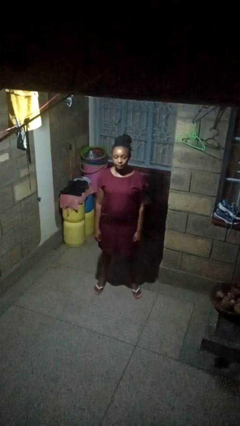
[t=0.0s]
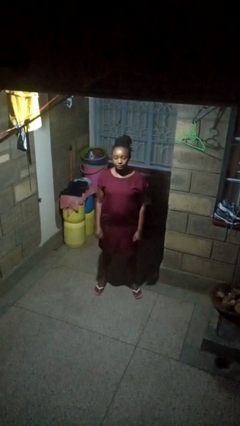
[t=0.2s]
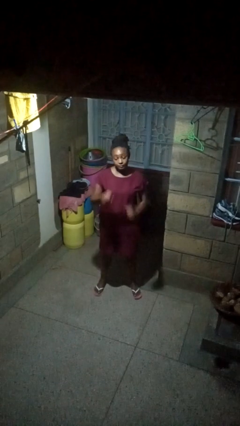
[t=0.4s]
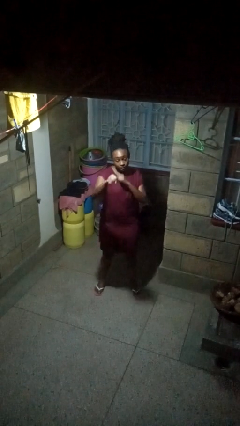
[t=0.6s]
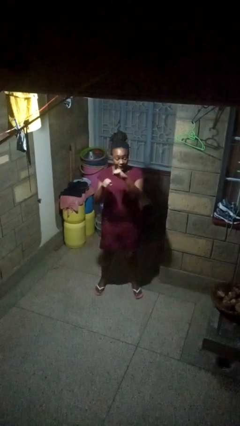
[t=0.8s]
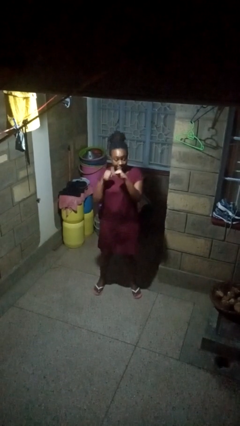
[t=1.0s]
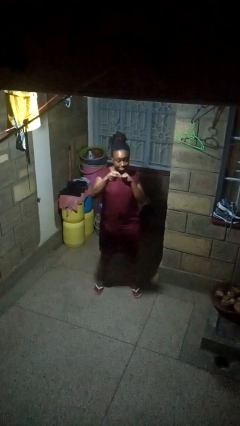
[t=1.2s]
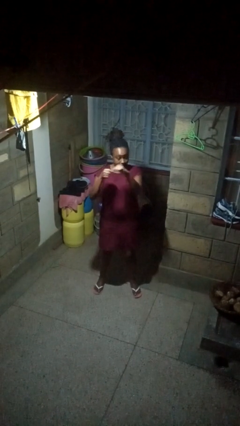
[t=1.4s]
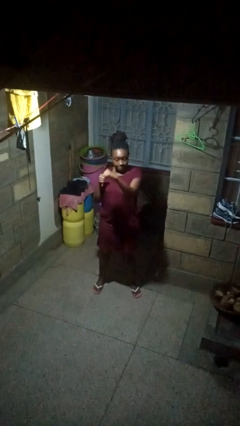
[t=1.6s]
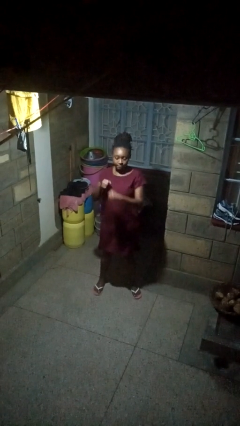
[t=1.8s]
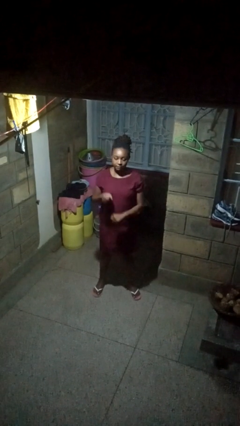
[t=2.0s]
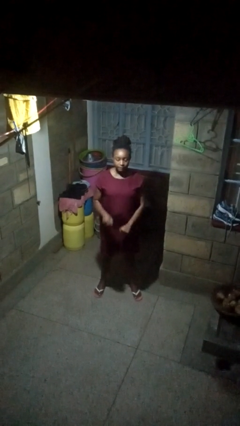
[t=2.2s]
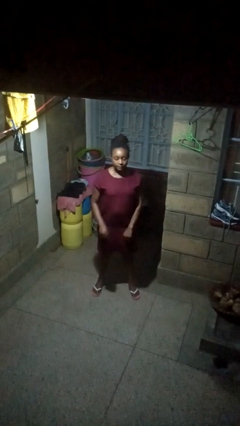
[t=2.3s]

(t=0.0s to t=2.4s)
person punches

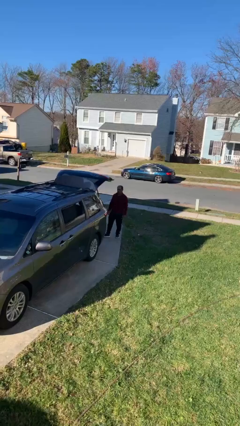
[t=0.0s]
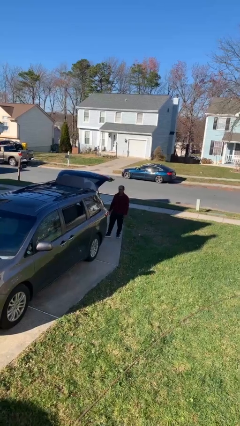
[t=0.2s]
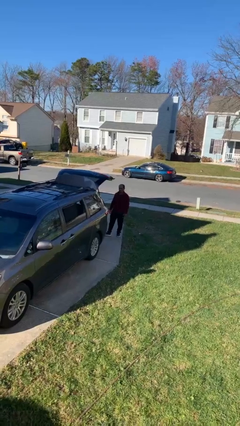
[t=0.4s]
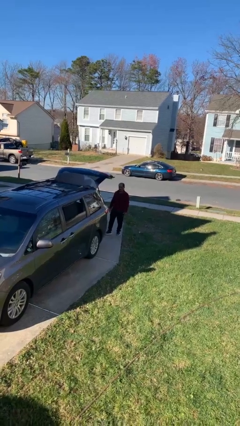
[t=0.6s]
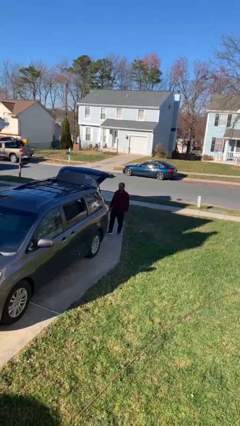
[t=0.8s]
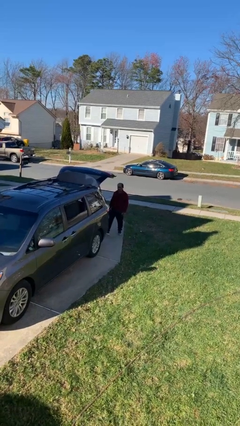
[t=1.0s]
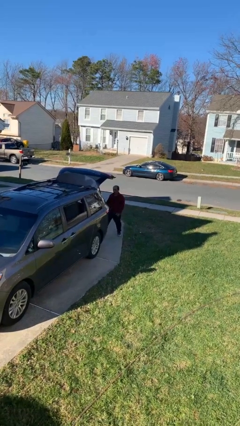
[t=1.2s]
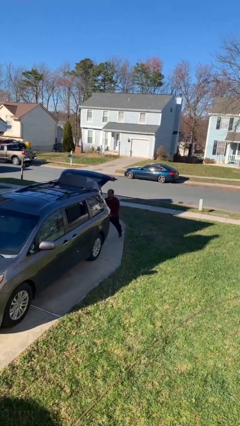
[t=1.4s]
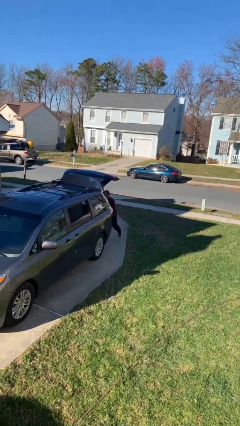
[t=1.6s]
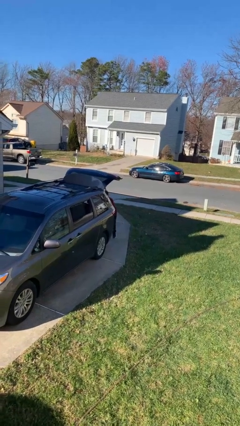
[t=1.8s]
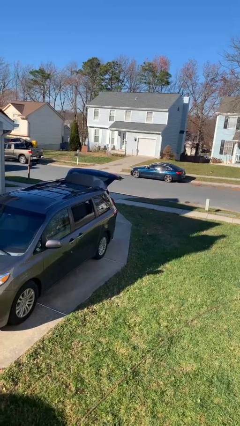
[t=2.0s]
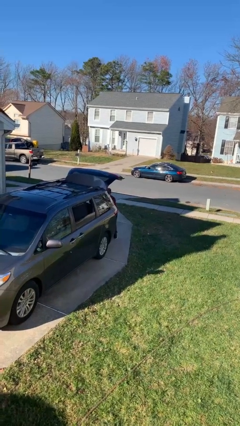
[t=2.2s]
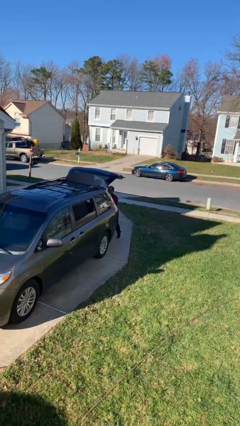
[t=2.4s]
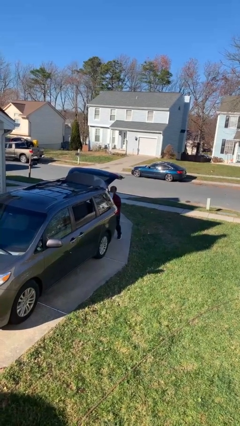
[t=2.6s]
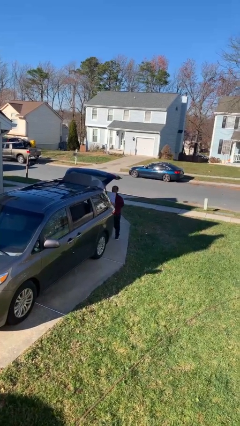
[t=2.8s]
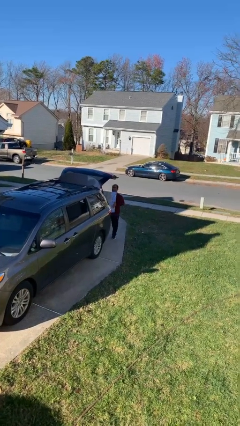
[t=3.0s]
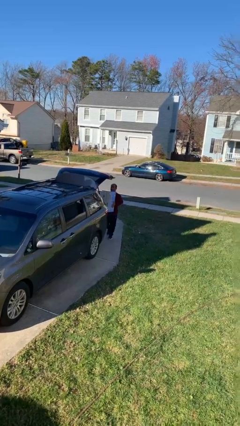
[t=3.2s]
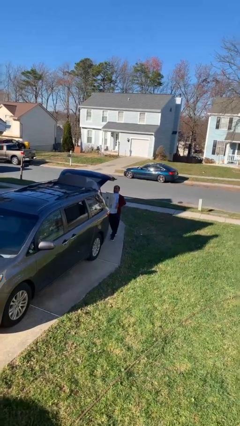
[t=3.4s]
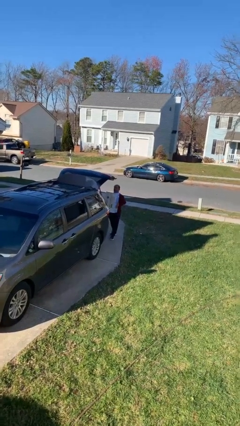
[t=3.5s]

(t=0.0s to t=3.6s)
person unloads car

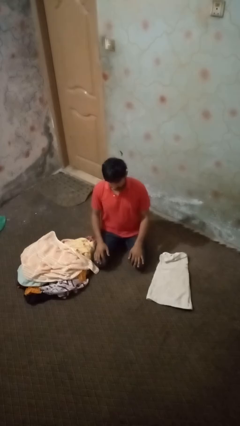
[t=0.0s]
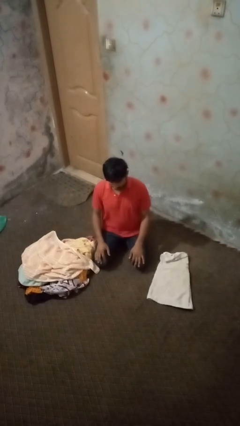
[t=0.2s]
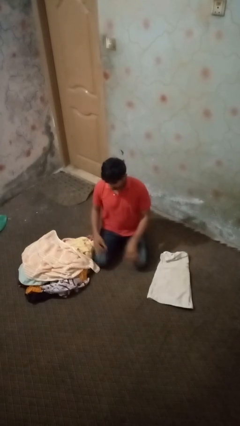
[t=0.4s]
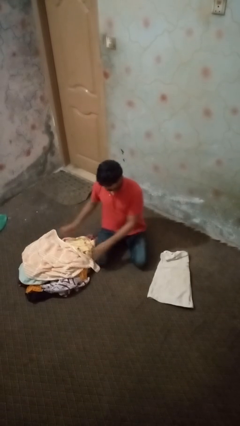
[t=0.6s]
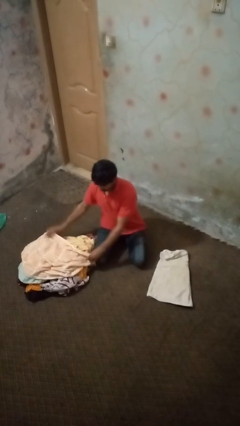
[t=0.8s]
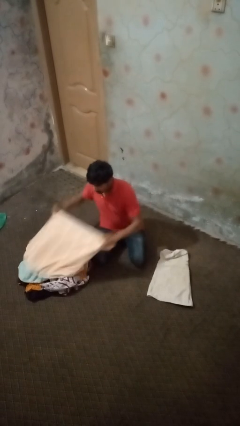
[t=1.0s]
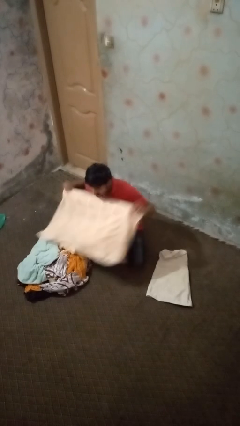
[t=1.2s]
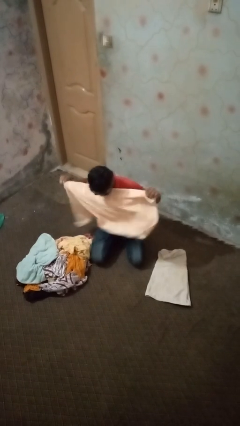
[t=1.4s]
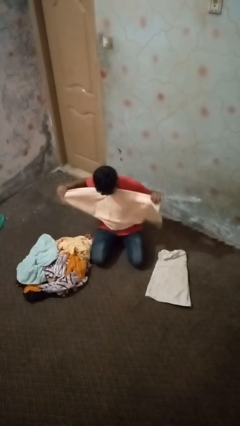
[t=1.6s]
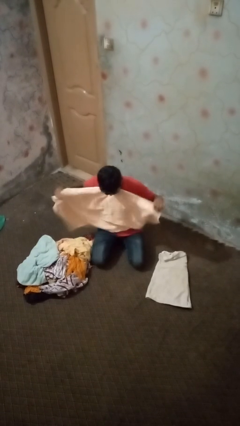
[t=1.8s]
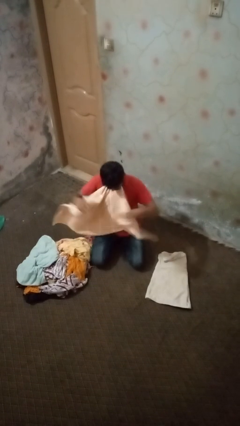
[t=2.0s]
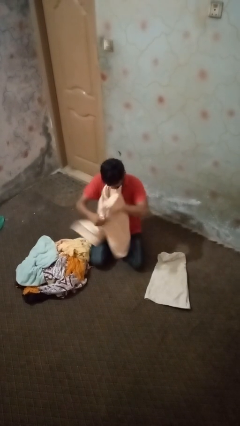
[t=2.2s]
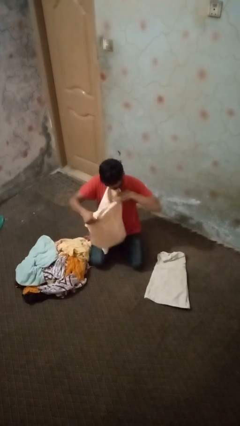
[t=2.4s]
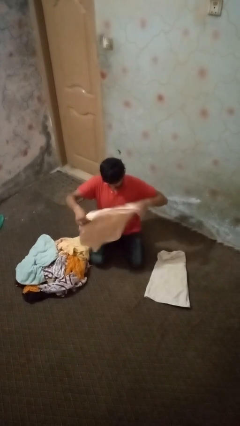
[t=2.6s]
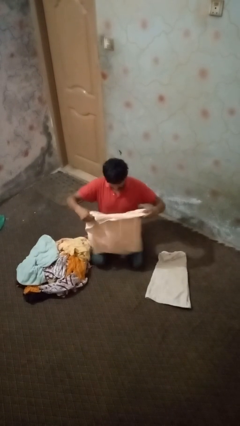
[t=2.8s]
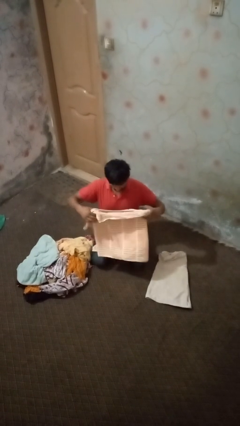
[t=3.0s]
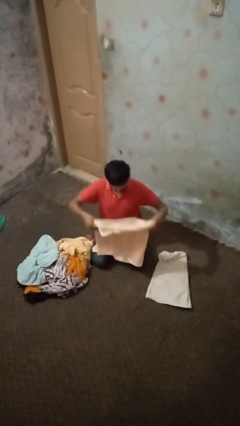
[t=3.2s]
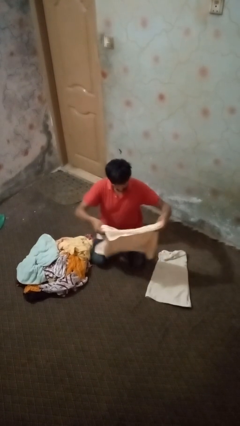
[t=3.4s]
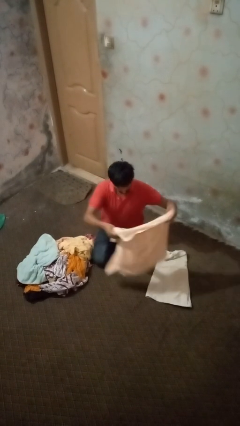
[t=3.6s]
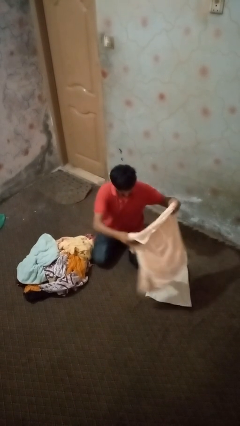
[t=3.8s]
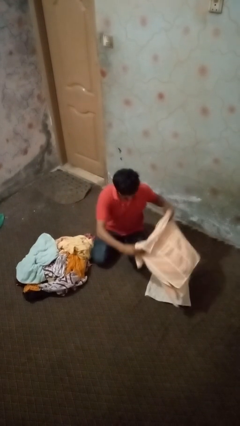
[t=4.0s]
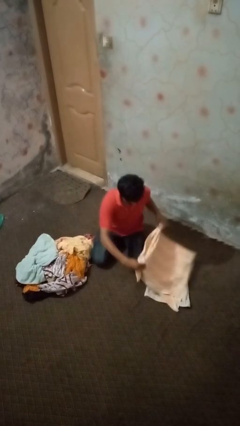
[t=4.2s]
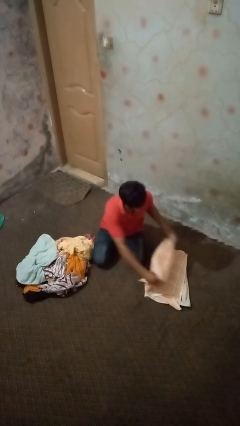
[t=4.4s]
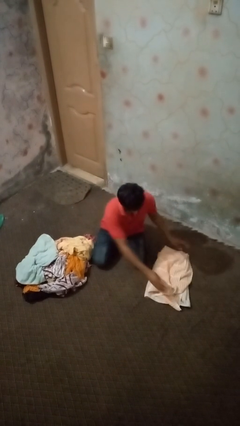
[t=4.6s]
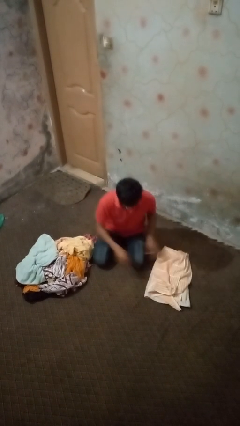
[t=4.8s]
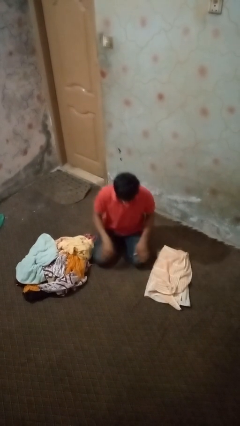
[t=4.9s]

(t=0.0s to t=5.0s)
person folds towel

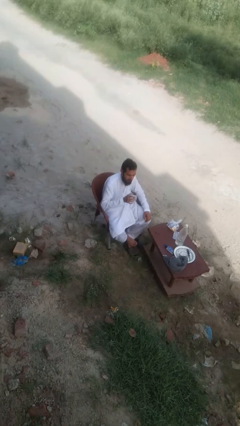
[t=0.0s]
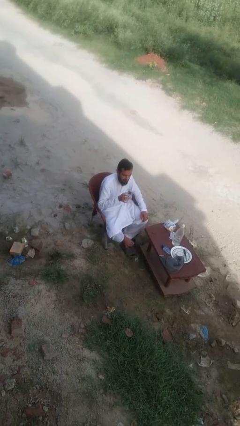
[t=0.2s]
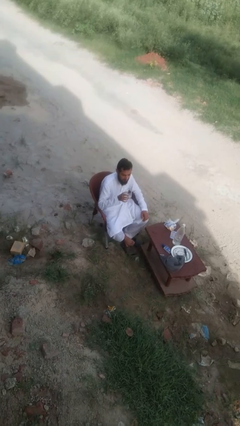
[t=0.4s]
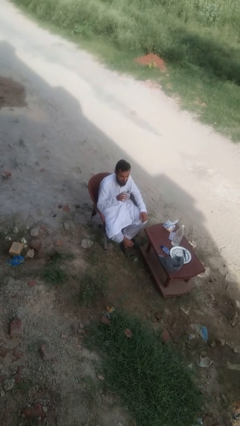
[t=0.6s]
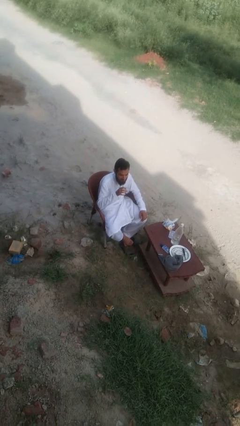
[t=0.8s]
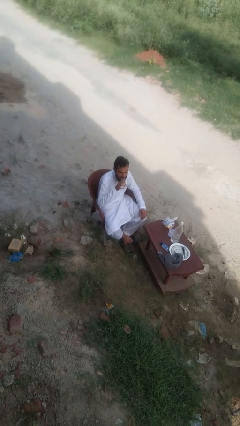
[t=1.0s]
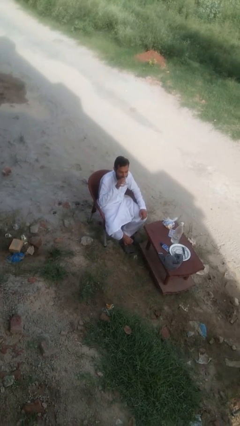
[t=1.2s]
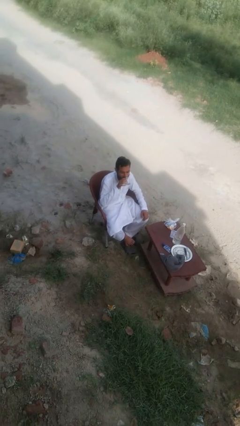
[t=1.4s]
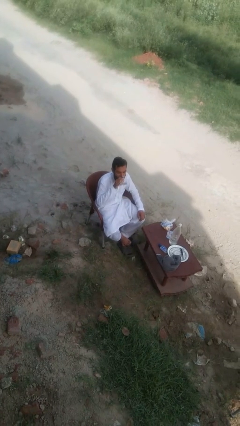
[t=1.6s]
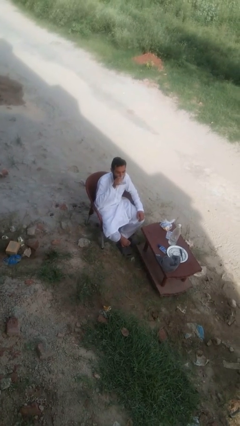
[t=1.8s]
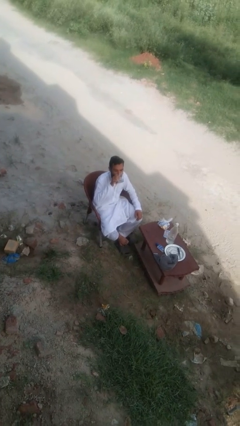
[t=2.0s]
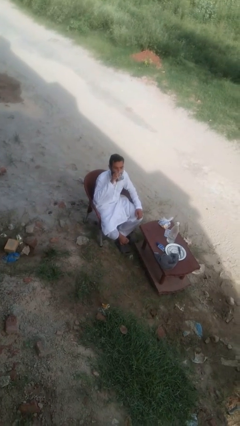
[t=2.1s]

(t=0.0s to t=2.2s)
person drinks from shotglass

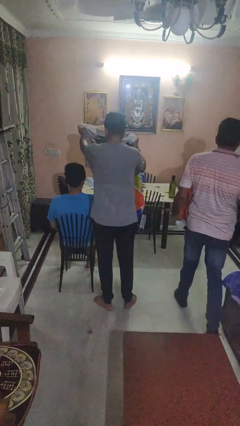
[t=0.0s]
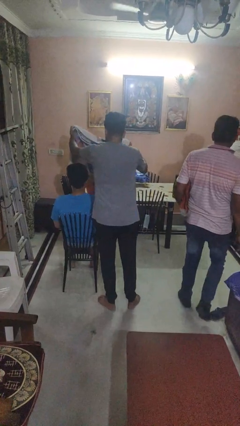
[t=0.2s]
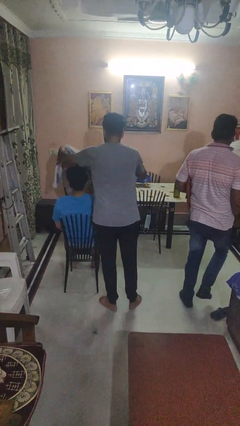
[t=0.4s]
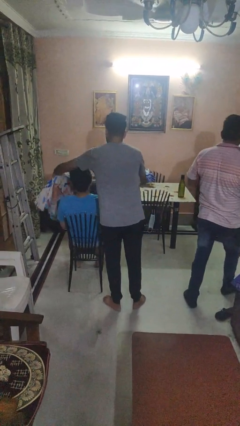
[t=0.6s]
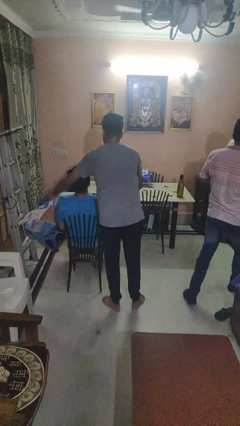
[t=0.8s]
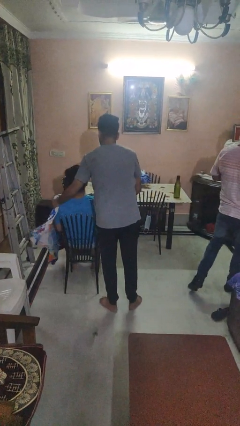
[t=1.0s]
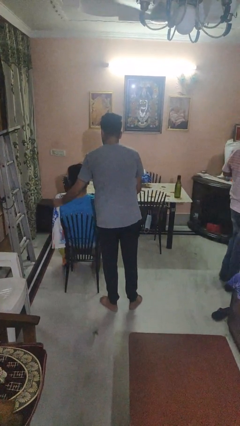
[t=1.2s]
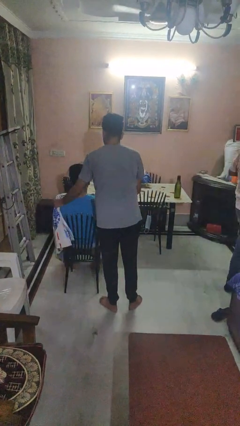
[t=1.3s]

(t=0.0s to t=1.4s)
person covers friend with blanket

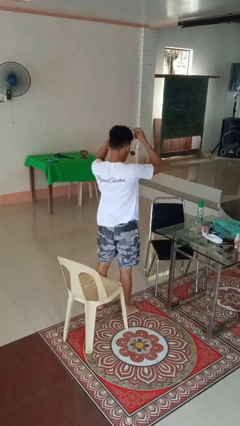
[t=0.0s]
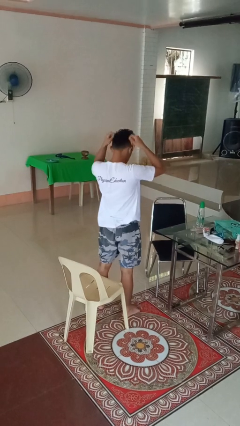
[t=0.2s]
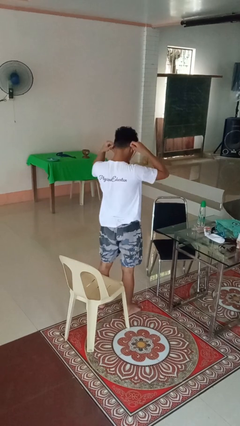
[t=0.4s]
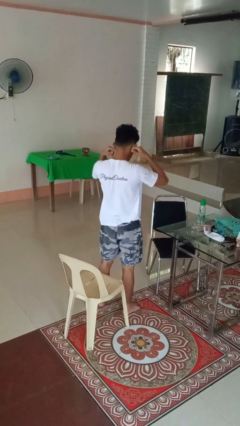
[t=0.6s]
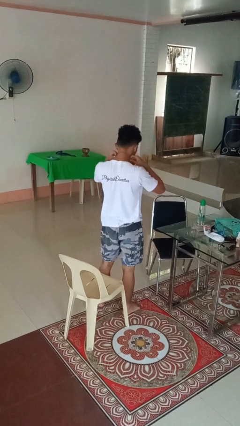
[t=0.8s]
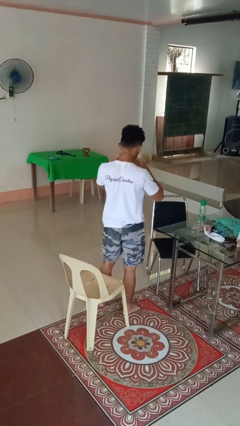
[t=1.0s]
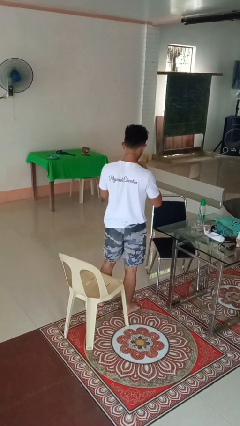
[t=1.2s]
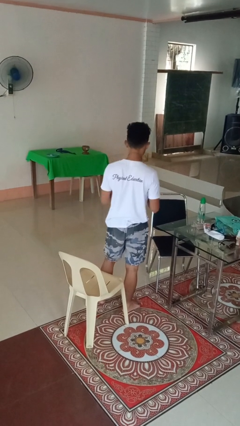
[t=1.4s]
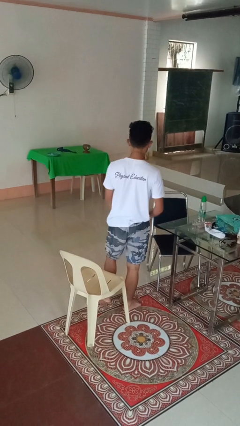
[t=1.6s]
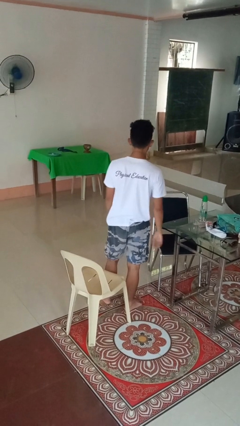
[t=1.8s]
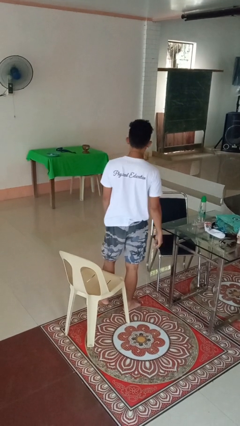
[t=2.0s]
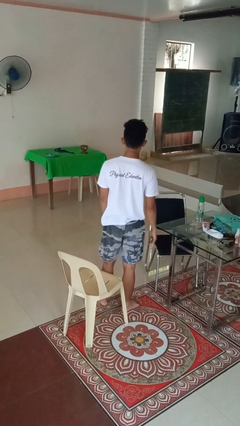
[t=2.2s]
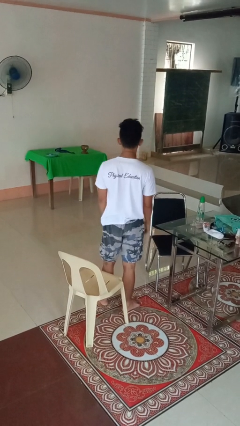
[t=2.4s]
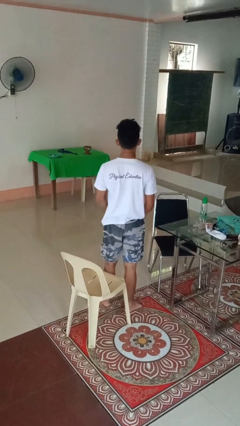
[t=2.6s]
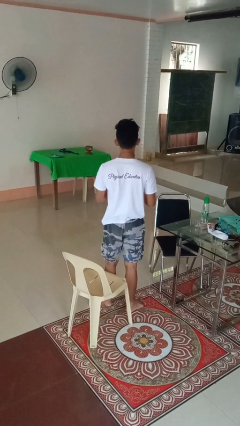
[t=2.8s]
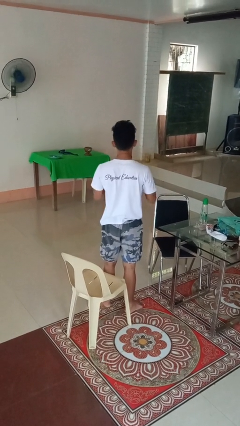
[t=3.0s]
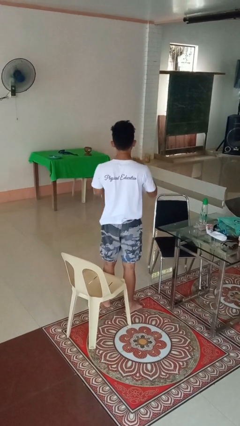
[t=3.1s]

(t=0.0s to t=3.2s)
person puts on necklace
